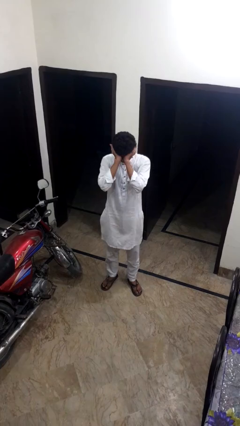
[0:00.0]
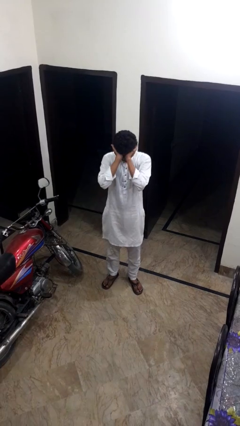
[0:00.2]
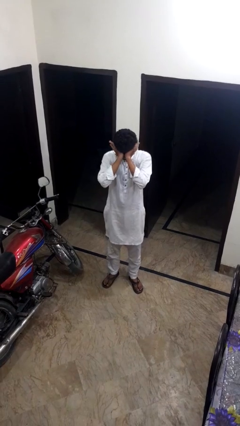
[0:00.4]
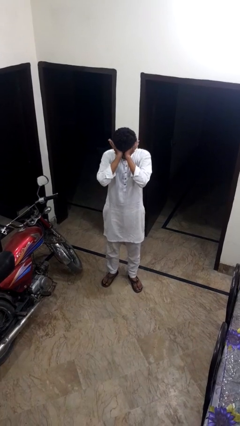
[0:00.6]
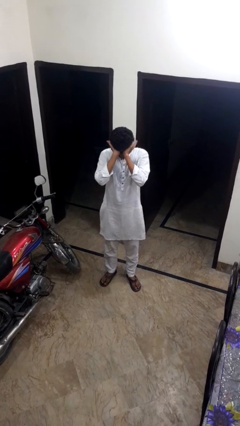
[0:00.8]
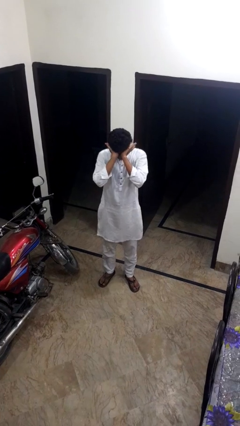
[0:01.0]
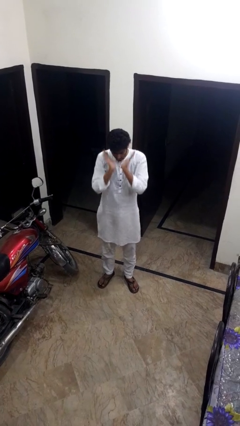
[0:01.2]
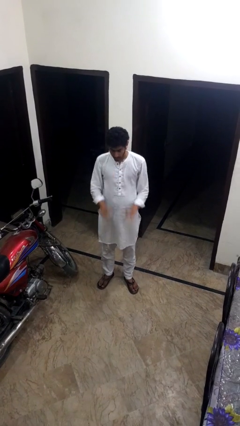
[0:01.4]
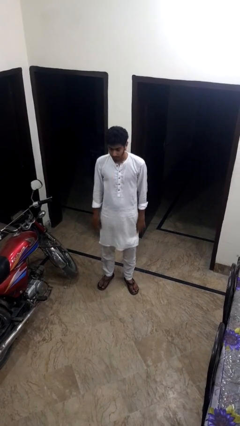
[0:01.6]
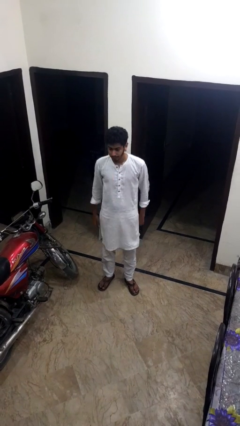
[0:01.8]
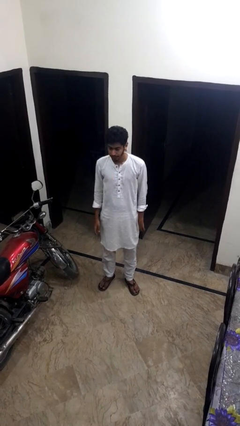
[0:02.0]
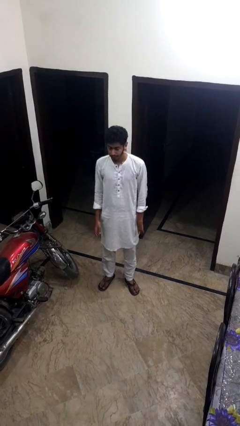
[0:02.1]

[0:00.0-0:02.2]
person rubs eyes

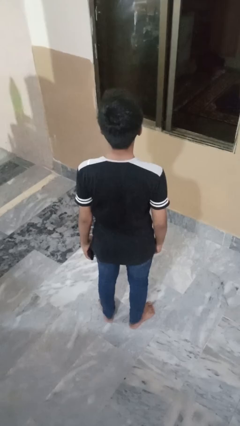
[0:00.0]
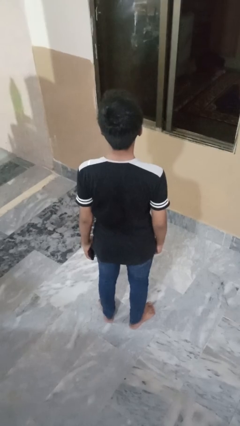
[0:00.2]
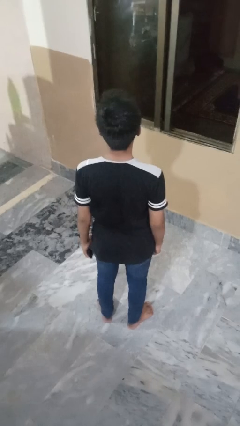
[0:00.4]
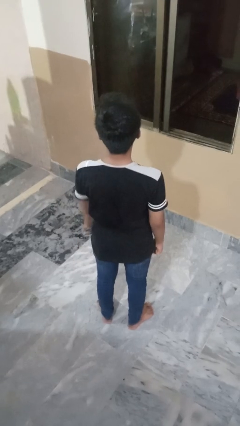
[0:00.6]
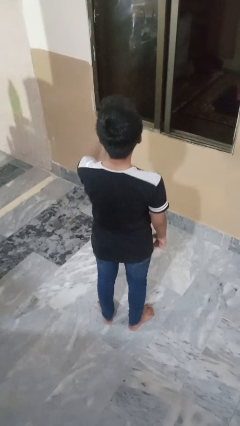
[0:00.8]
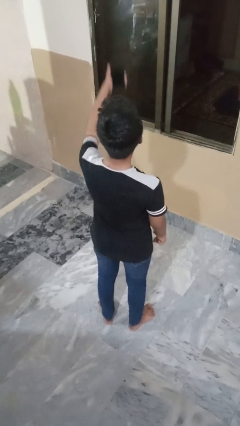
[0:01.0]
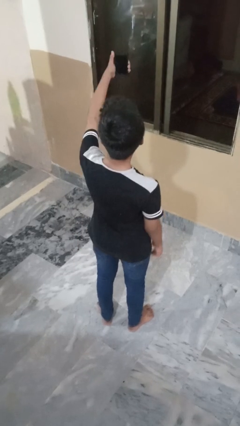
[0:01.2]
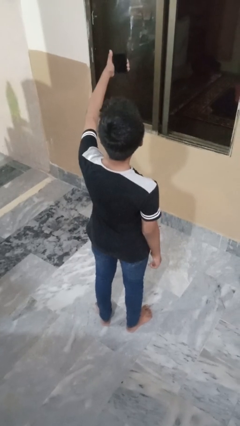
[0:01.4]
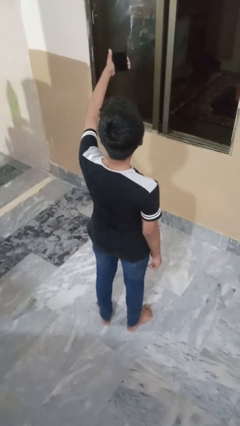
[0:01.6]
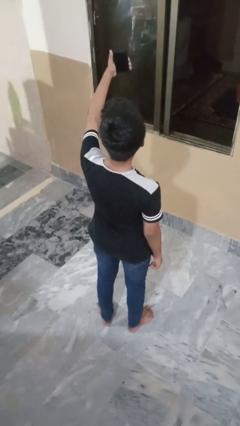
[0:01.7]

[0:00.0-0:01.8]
person takes selfie

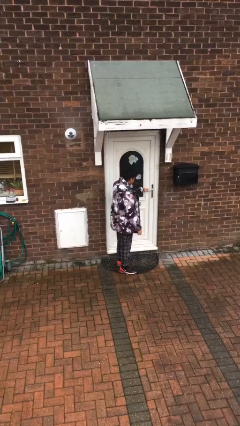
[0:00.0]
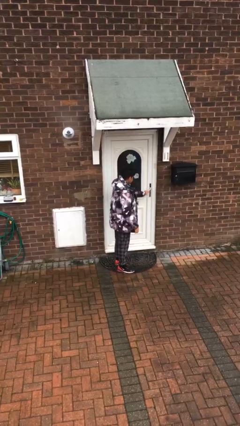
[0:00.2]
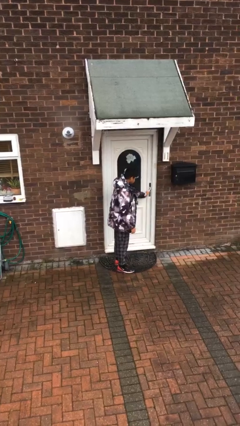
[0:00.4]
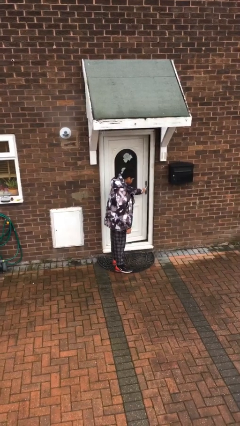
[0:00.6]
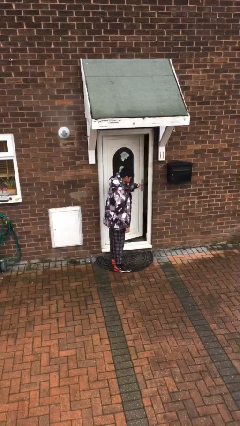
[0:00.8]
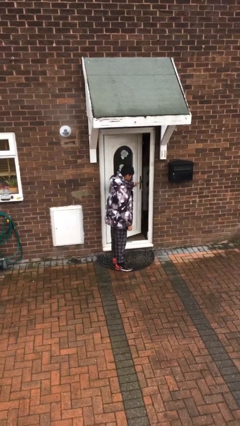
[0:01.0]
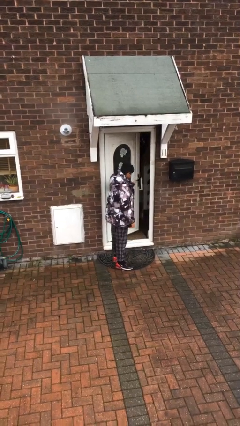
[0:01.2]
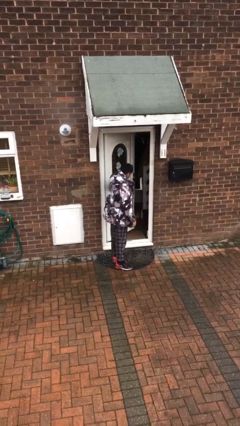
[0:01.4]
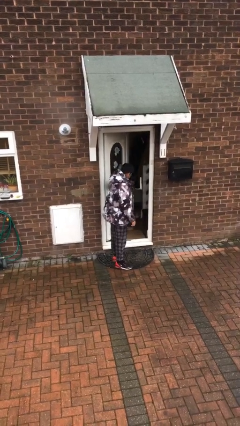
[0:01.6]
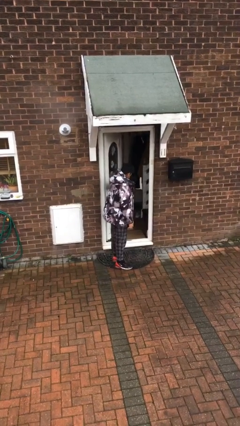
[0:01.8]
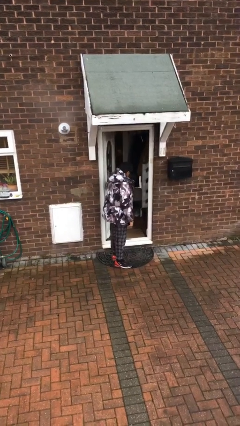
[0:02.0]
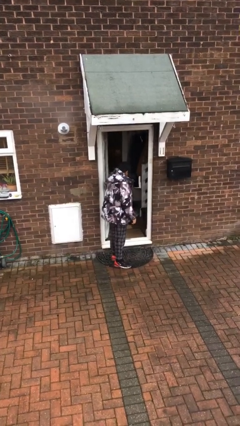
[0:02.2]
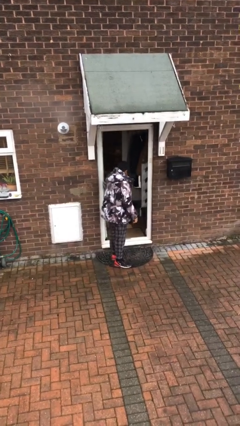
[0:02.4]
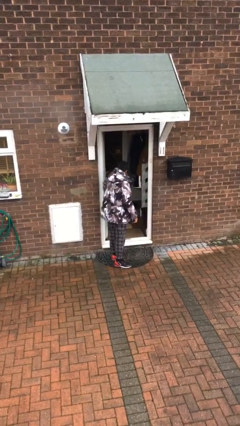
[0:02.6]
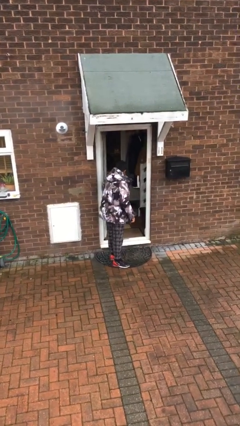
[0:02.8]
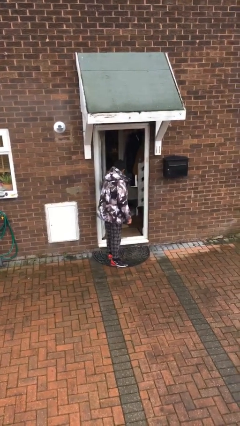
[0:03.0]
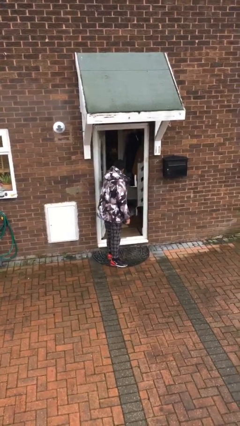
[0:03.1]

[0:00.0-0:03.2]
person opens facility door

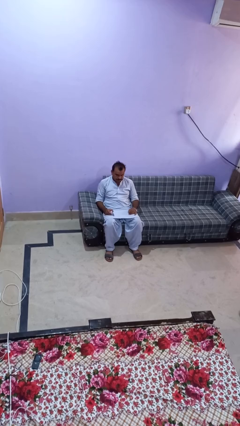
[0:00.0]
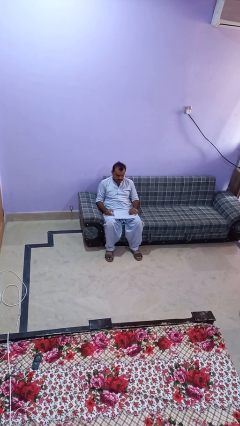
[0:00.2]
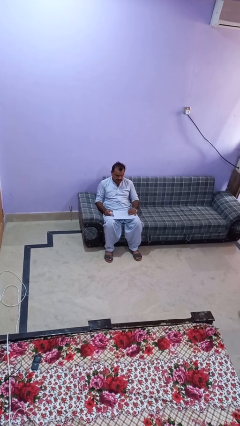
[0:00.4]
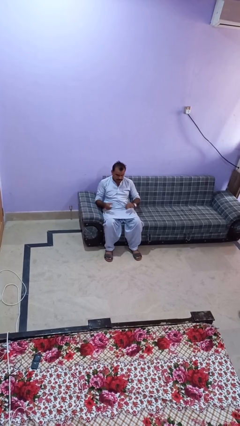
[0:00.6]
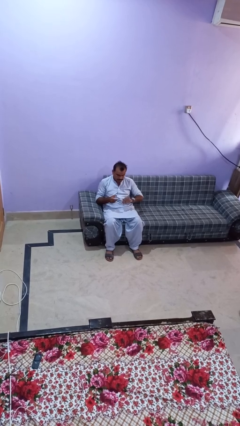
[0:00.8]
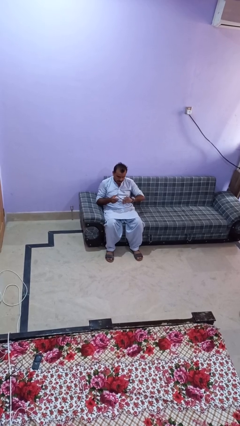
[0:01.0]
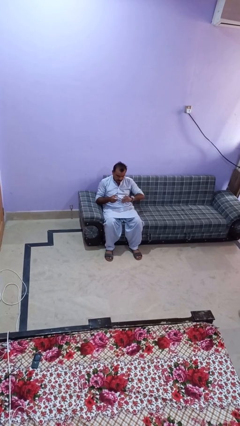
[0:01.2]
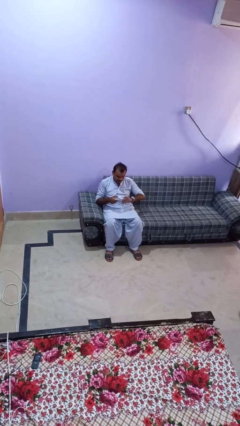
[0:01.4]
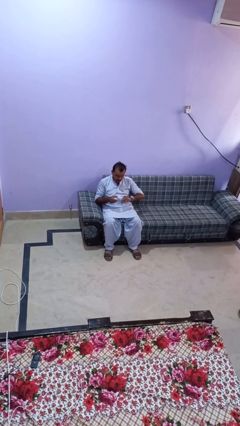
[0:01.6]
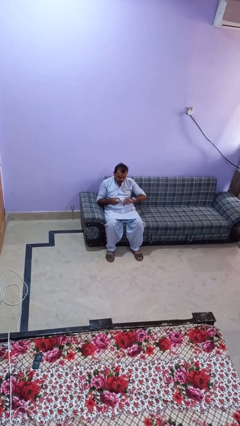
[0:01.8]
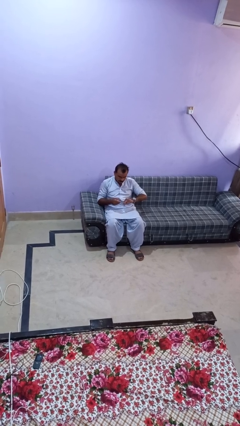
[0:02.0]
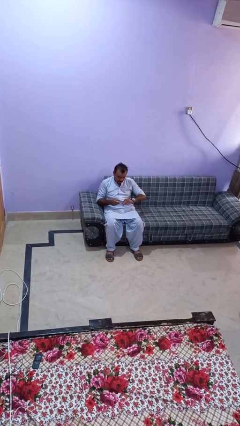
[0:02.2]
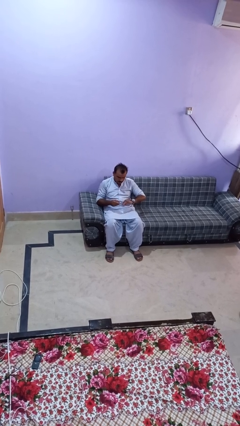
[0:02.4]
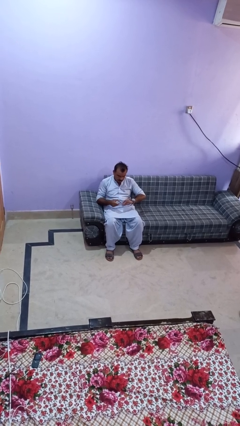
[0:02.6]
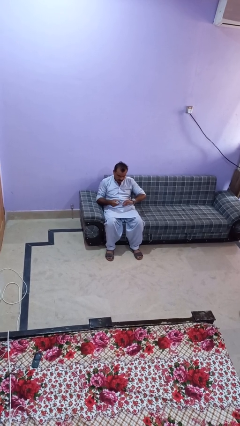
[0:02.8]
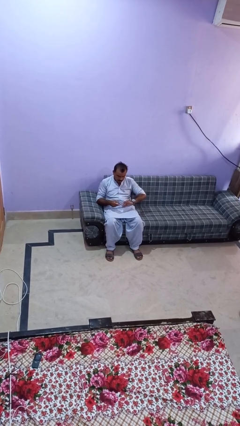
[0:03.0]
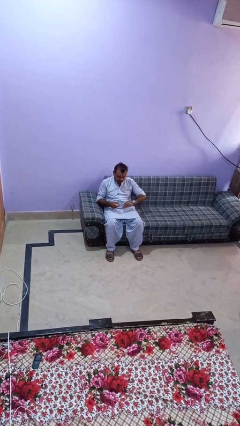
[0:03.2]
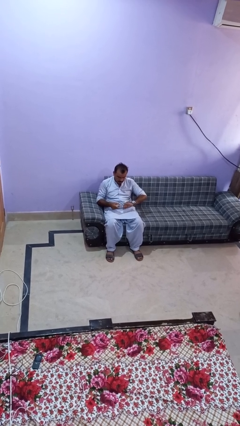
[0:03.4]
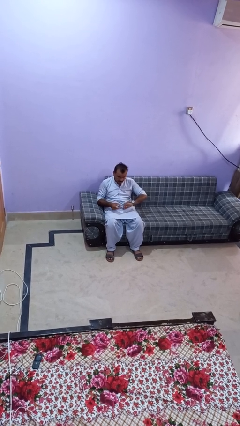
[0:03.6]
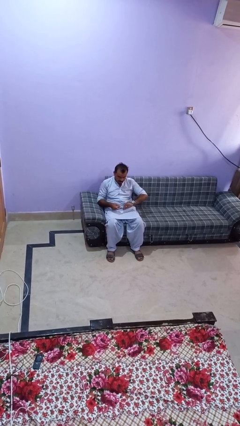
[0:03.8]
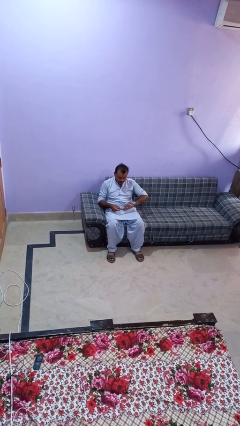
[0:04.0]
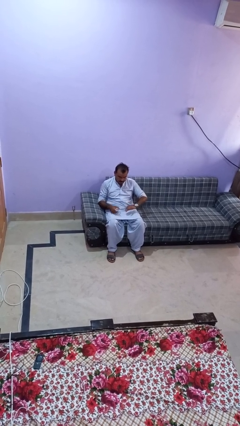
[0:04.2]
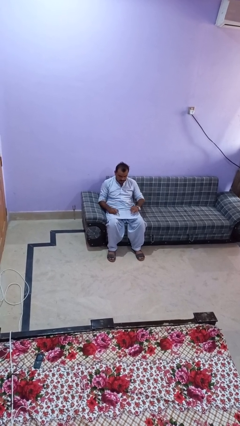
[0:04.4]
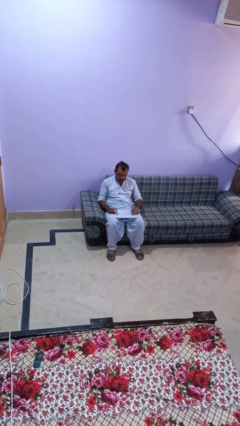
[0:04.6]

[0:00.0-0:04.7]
person clips fingernails

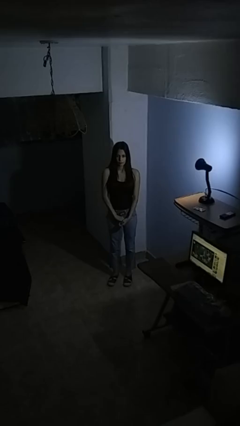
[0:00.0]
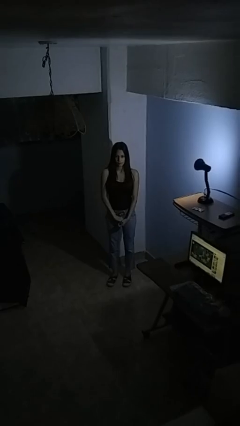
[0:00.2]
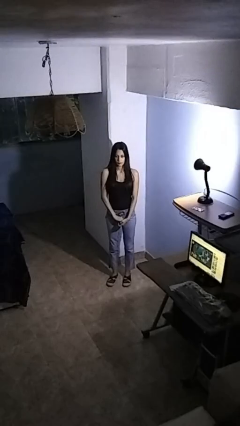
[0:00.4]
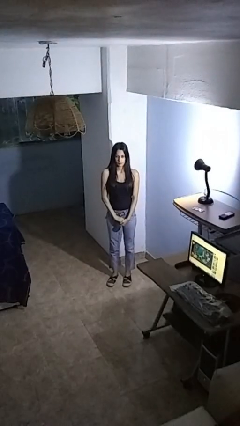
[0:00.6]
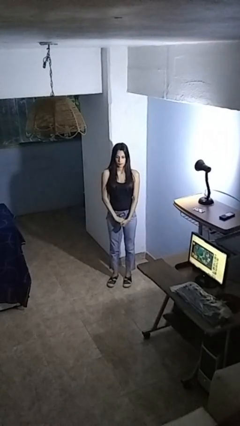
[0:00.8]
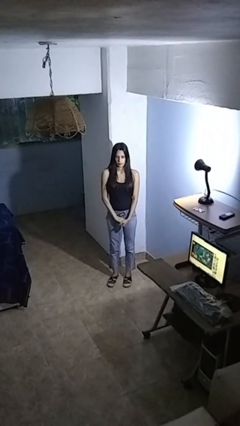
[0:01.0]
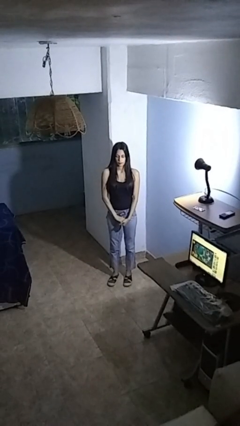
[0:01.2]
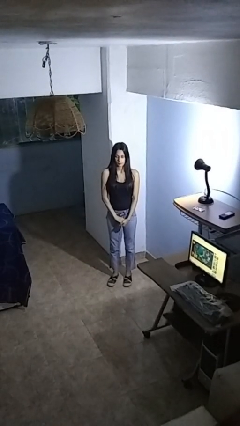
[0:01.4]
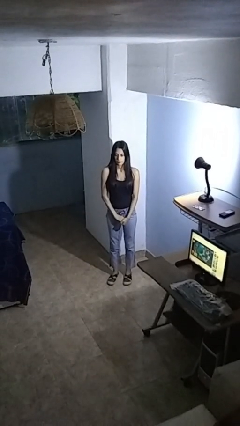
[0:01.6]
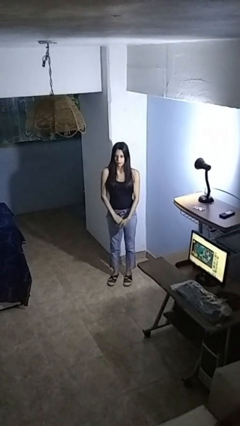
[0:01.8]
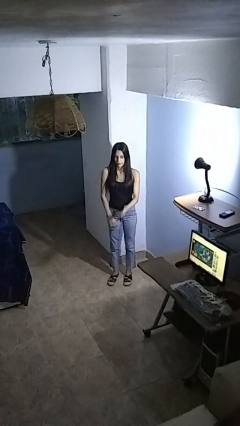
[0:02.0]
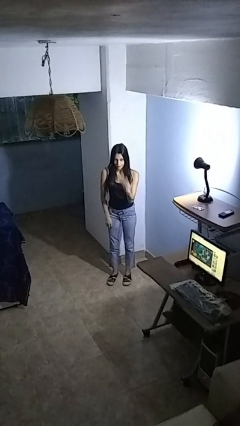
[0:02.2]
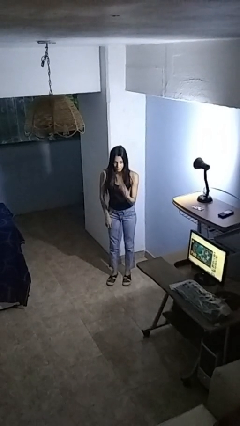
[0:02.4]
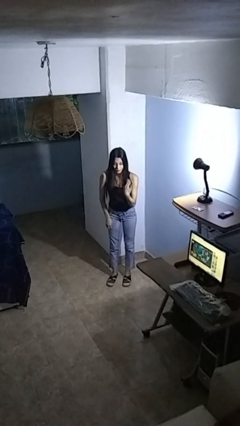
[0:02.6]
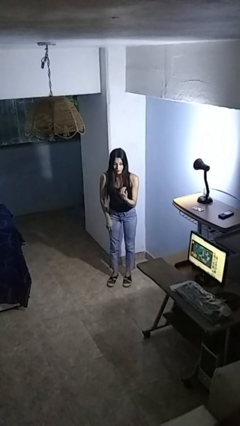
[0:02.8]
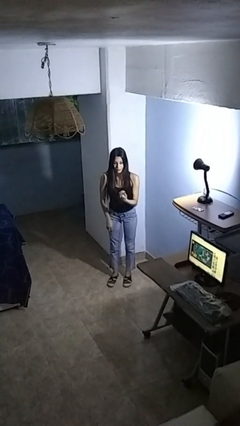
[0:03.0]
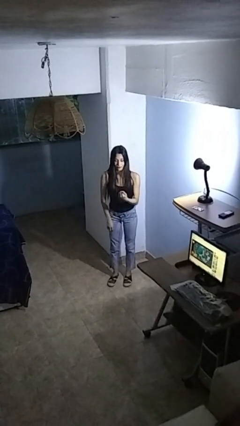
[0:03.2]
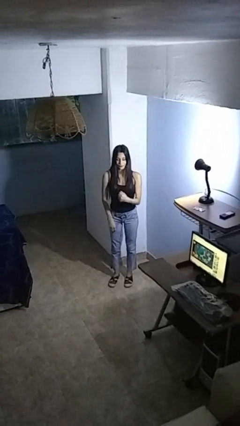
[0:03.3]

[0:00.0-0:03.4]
person gestures come here

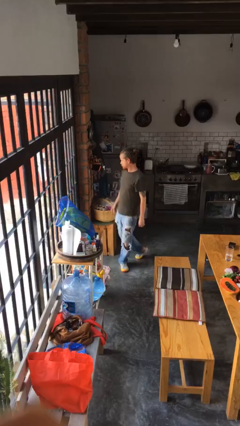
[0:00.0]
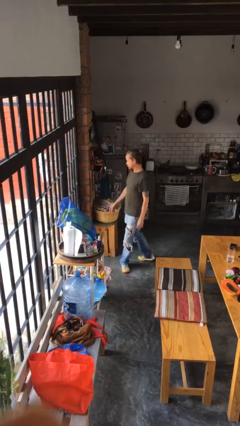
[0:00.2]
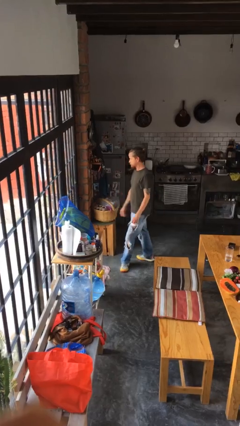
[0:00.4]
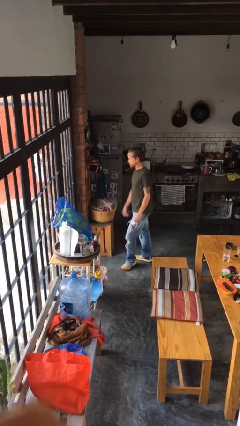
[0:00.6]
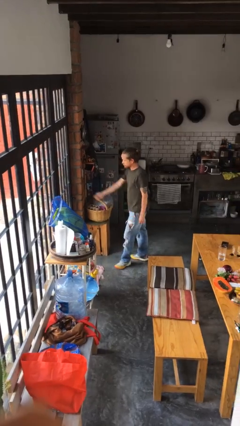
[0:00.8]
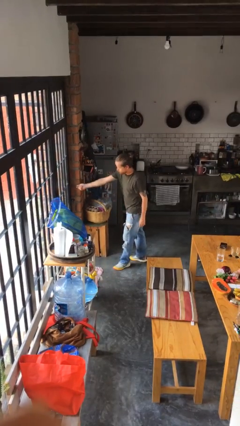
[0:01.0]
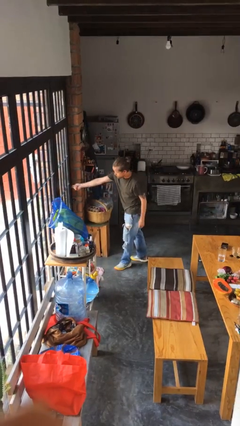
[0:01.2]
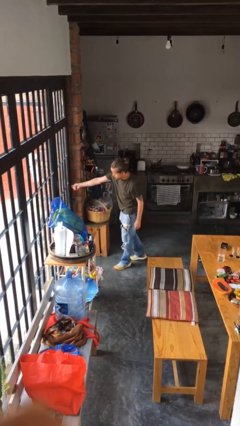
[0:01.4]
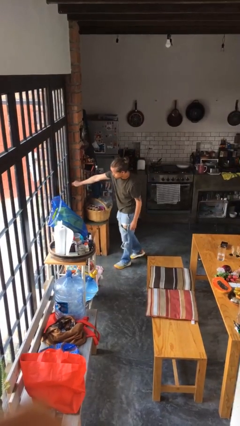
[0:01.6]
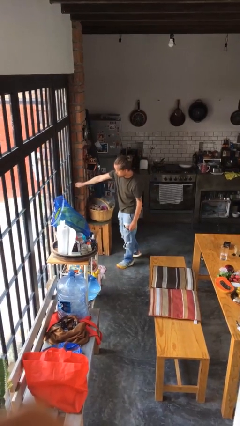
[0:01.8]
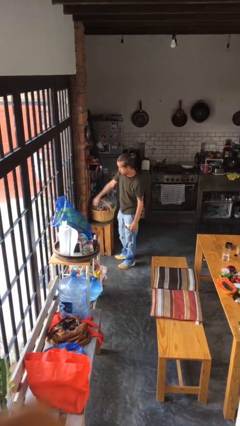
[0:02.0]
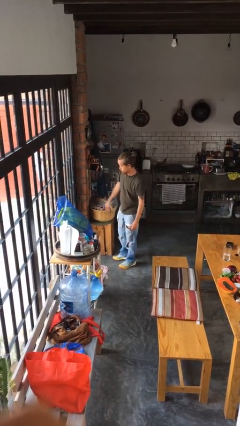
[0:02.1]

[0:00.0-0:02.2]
person unlocks door with keys
